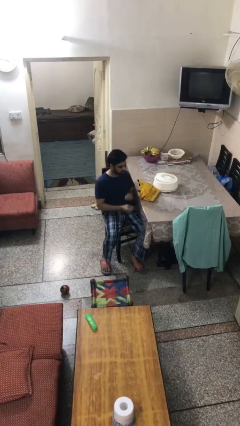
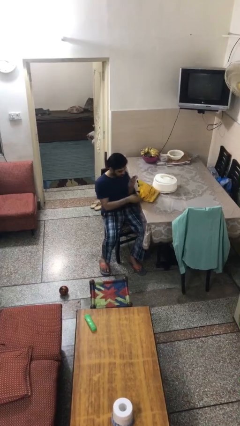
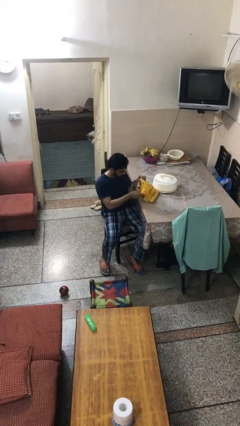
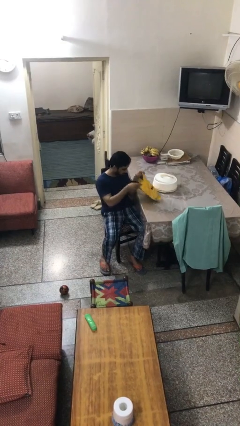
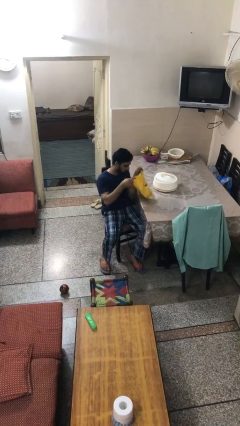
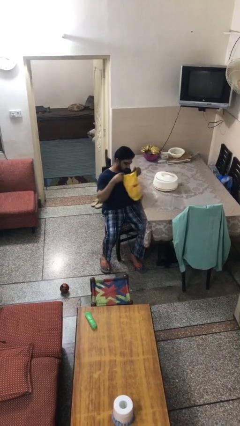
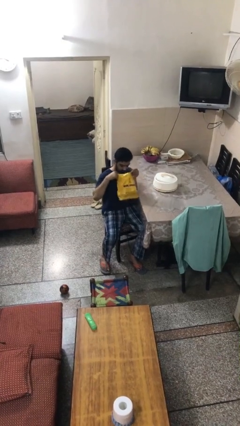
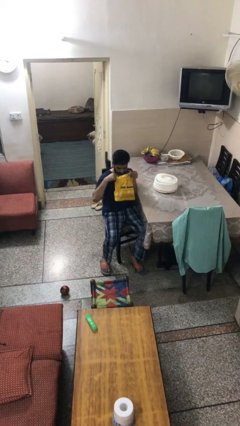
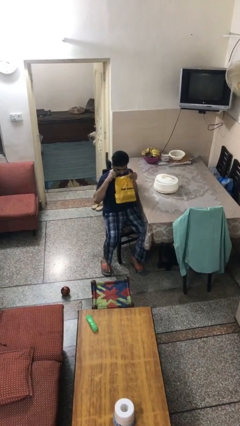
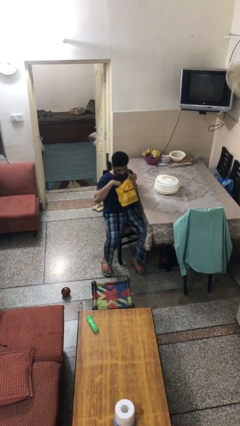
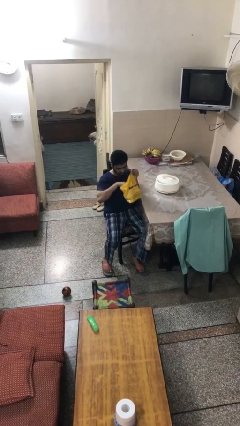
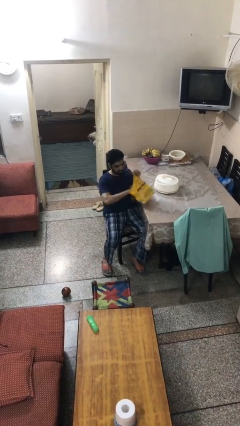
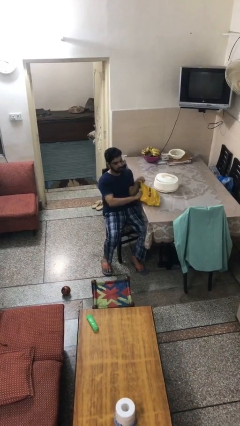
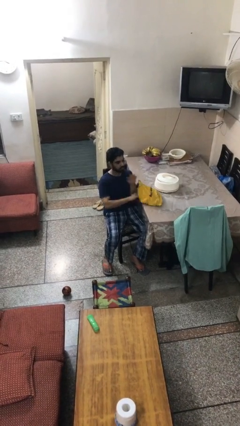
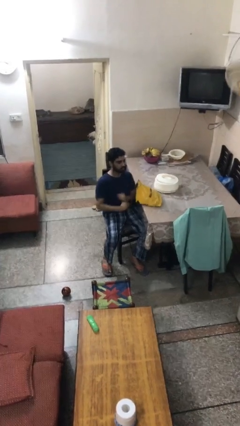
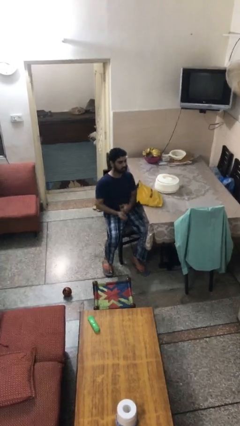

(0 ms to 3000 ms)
person searches in bag

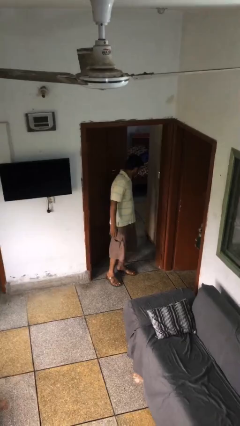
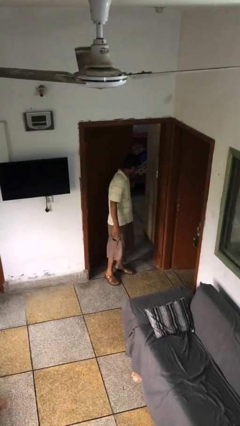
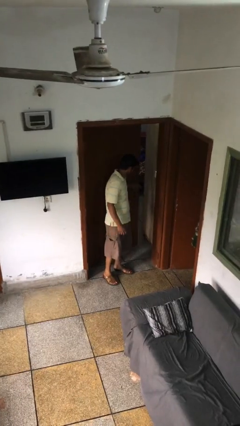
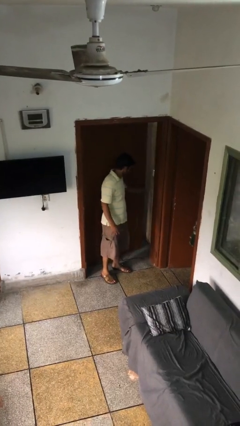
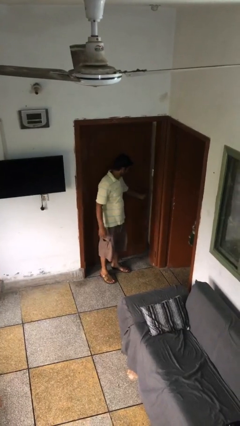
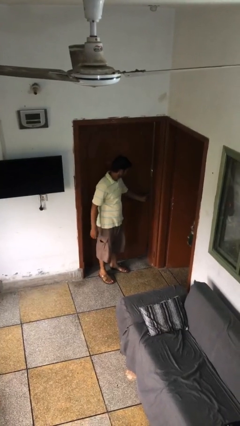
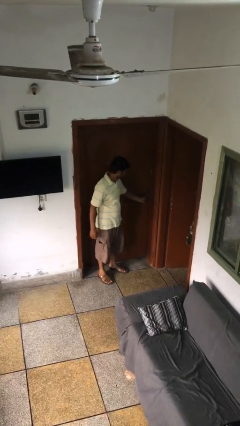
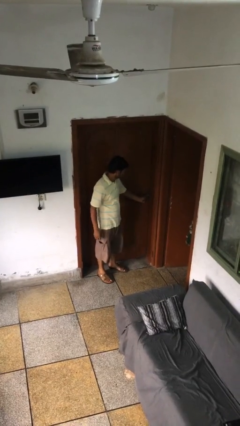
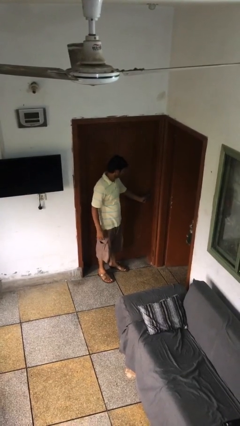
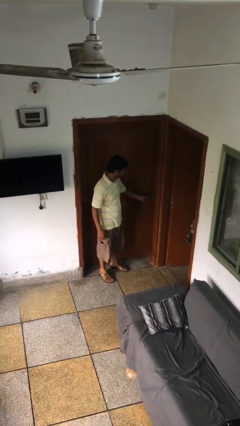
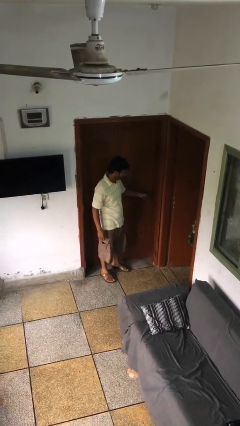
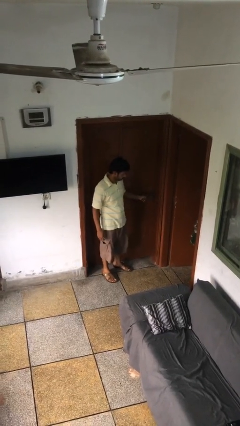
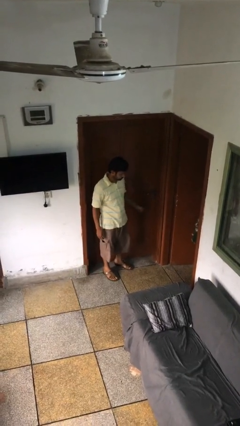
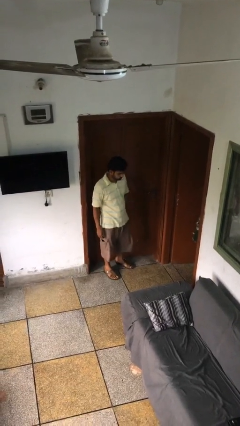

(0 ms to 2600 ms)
person closes facility door

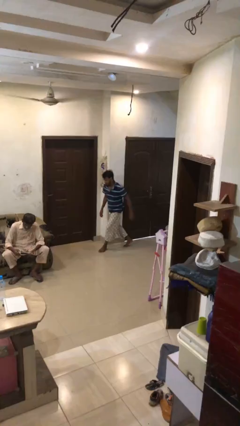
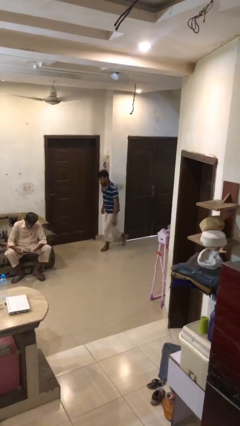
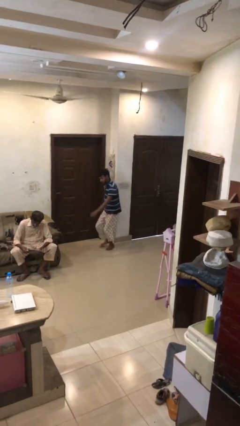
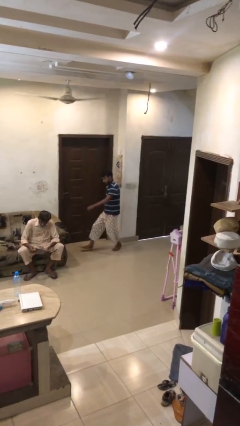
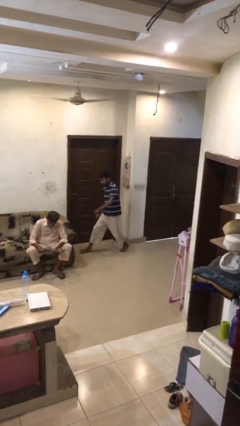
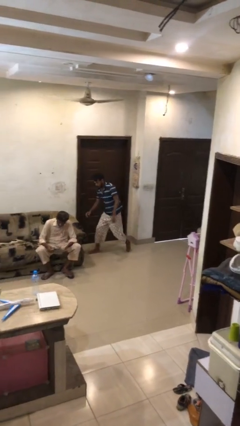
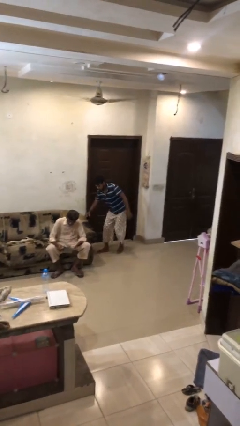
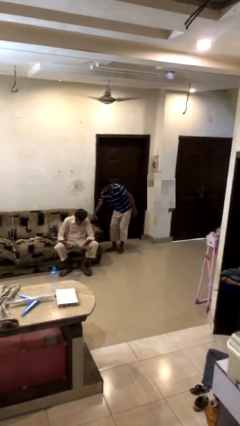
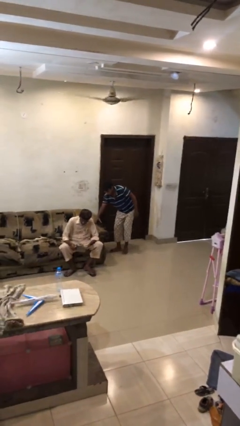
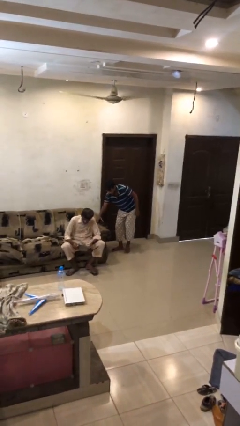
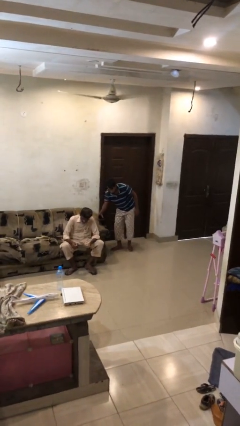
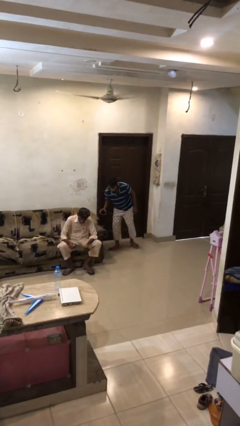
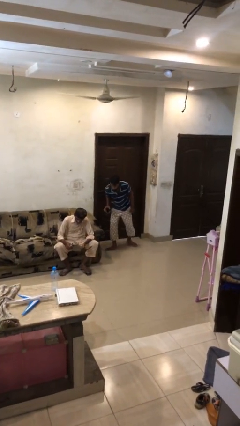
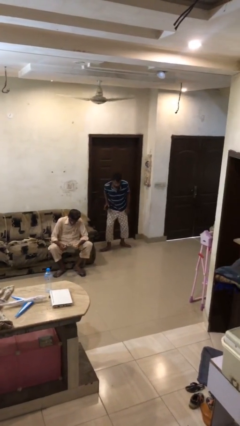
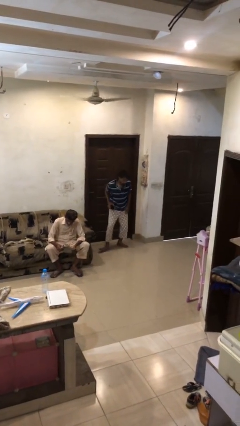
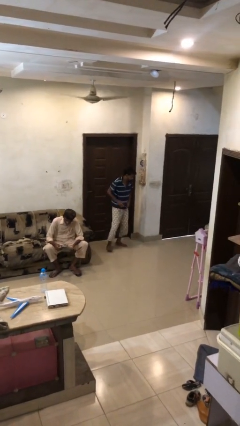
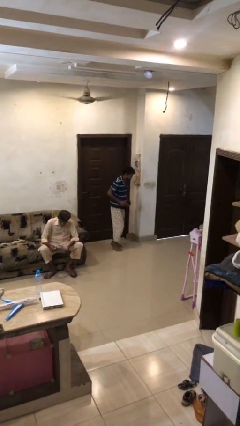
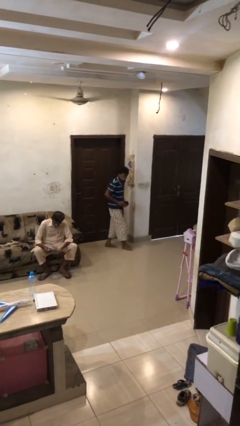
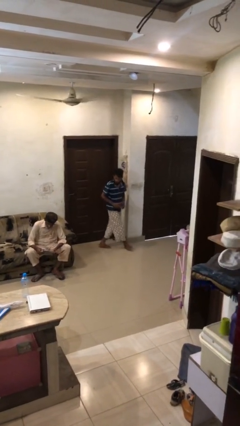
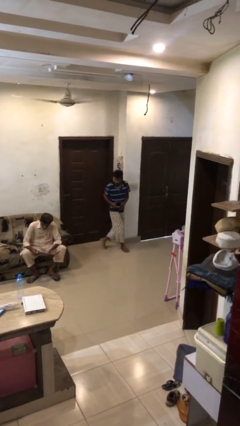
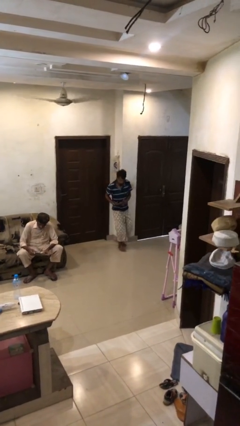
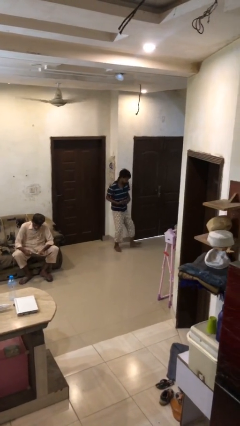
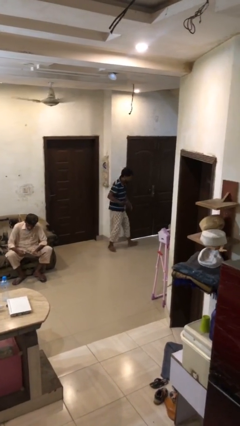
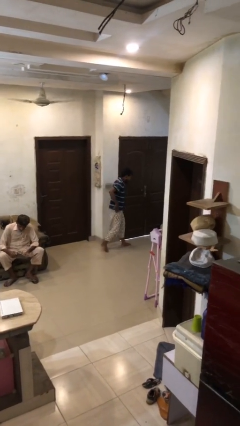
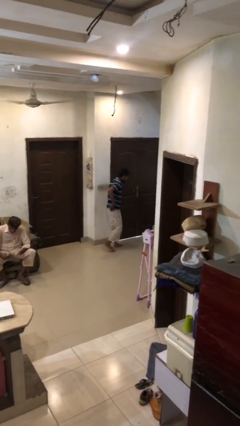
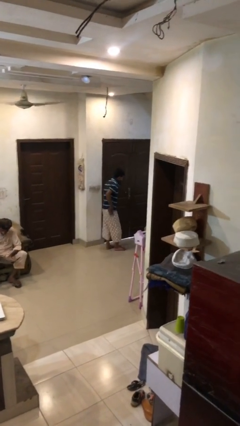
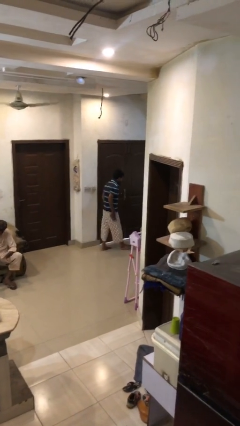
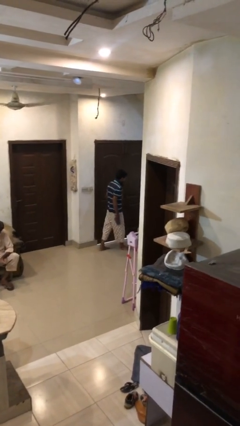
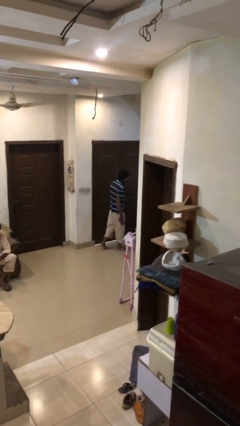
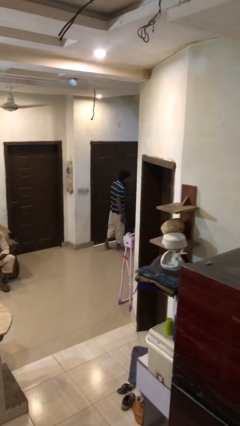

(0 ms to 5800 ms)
person steals object from person

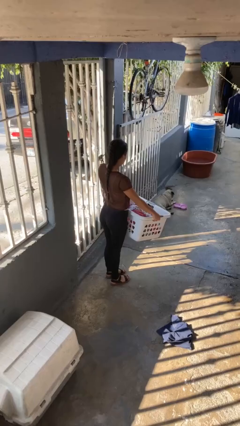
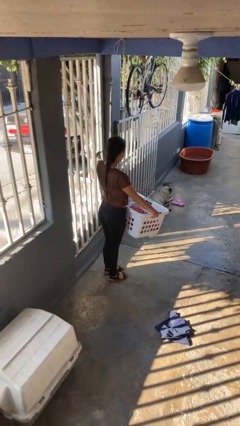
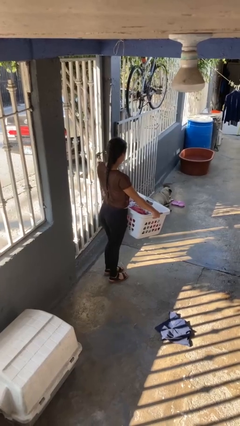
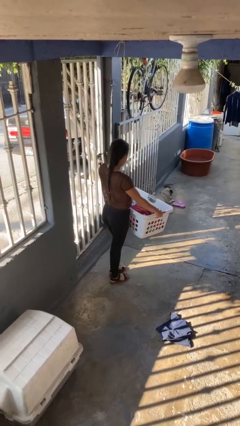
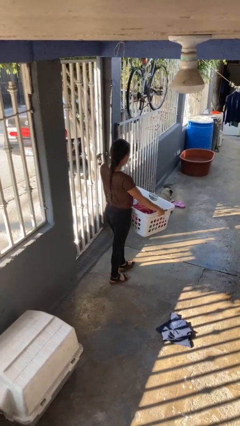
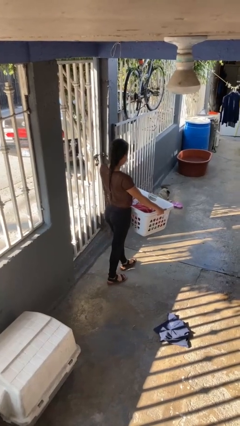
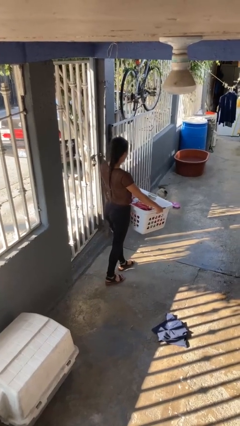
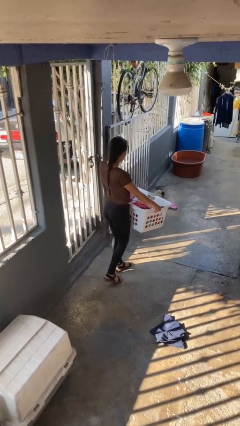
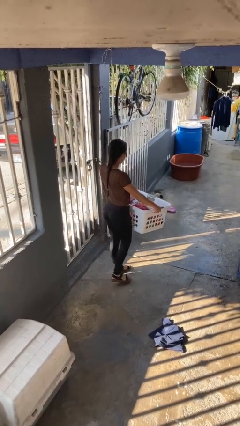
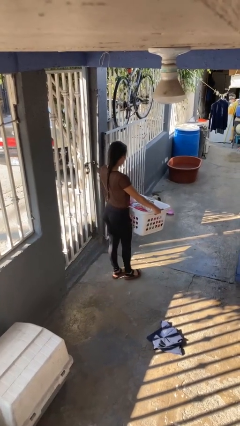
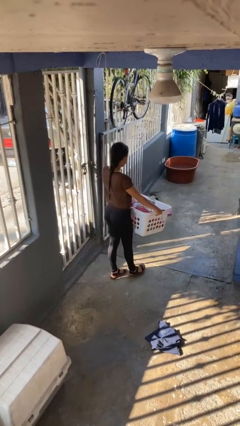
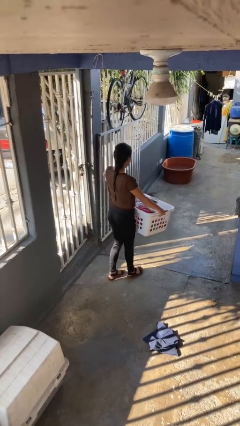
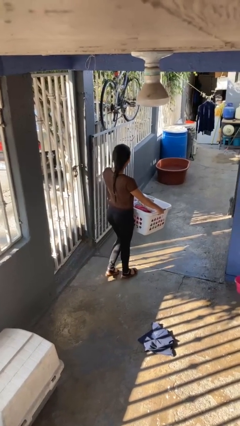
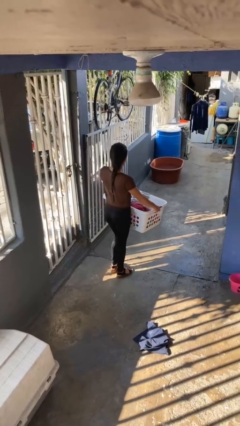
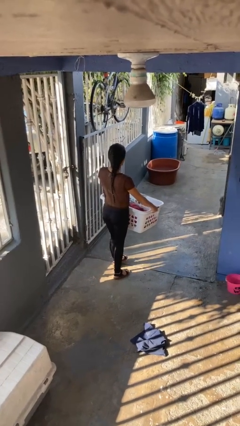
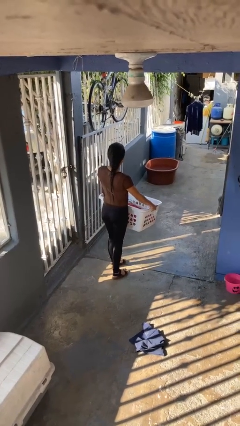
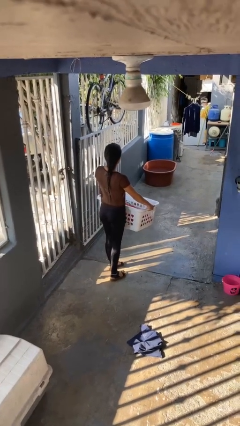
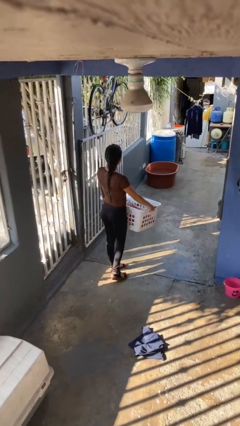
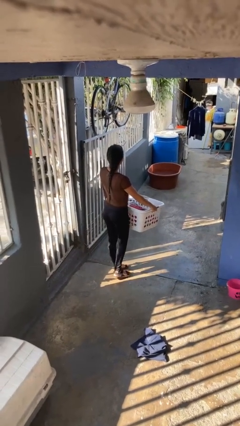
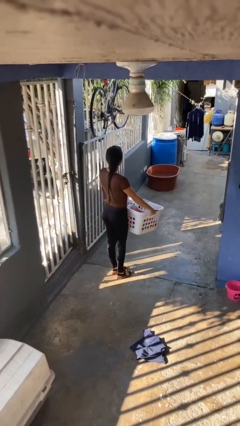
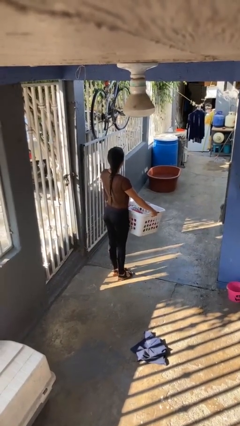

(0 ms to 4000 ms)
person carries laundry basket

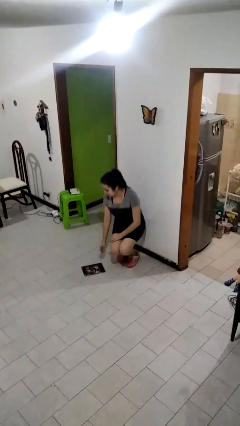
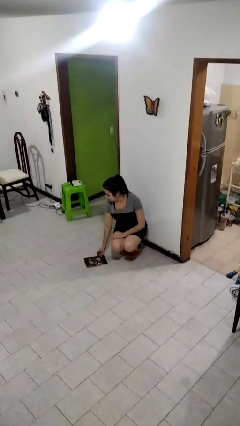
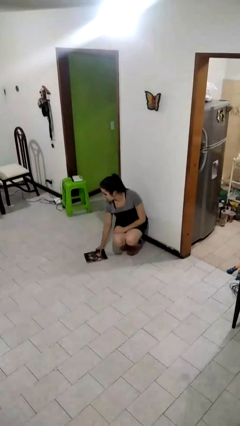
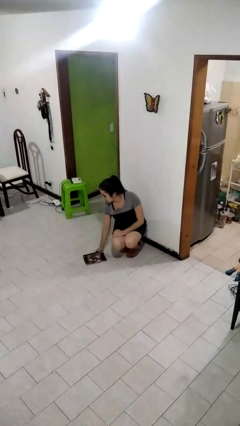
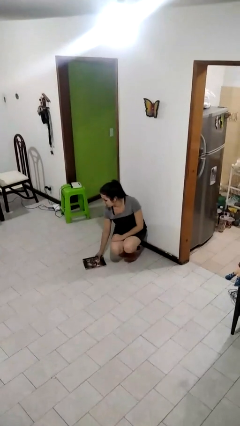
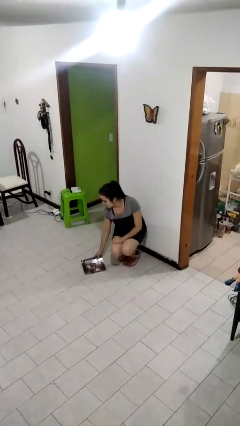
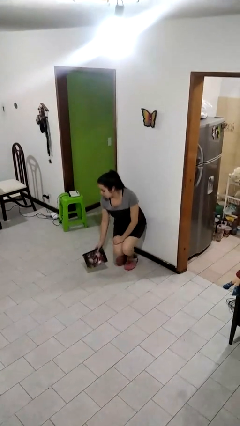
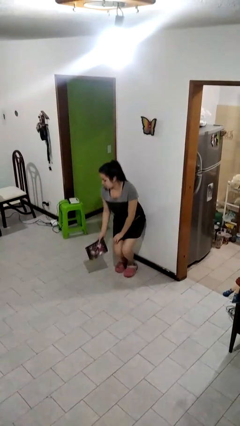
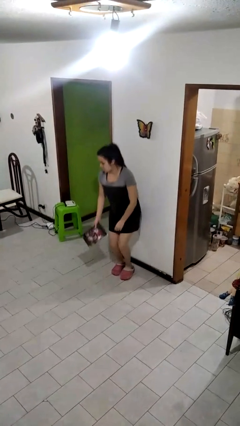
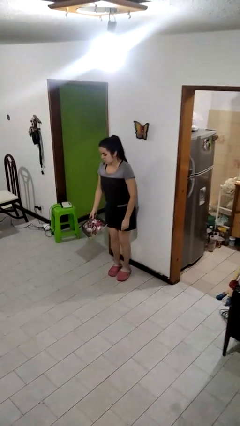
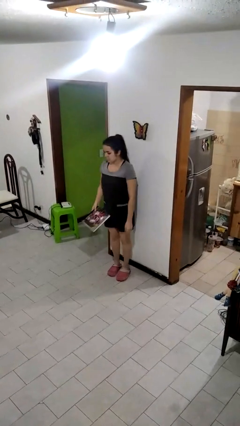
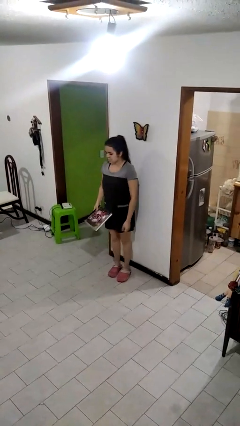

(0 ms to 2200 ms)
person picks up object from floor

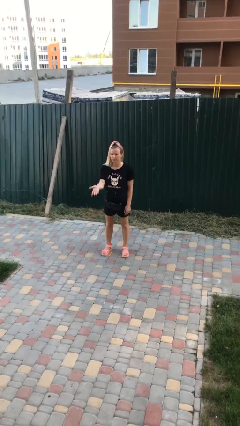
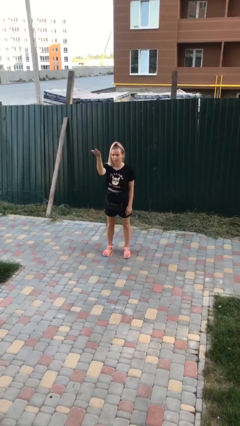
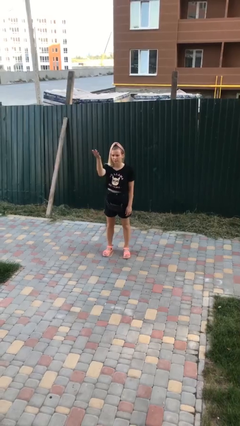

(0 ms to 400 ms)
person gestures swipe up
